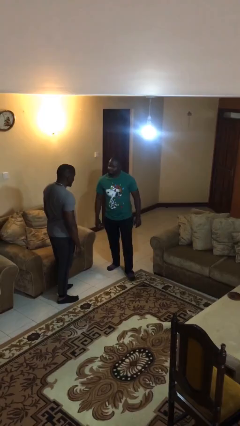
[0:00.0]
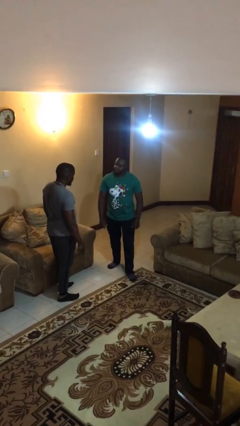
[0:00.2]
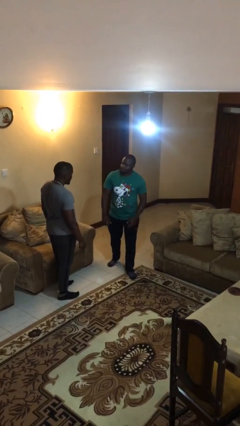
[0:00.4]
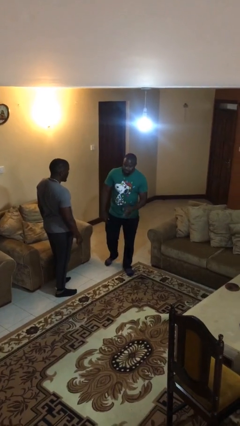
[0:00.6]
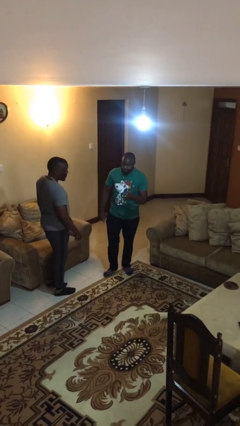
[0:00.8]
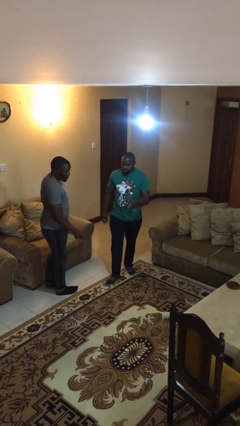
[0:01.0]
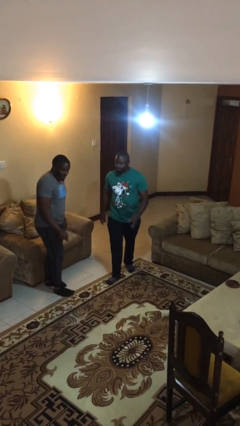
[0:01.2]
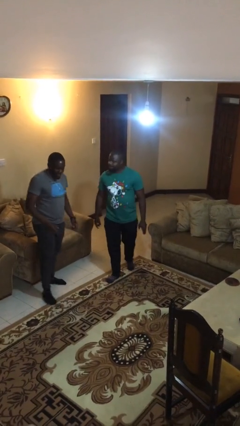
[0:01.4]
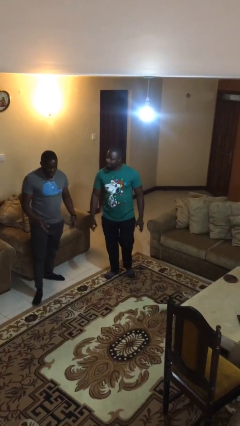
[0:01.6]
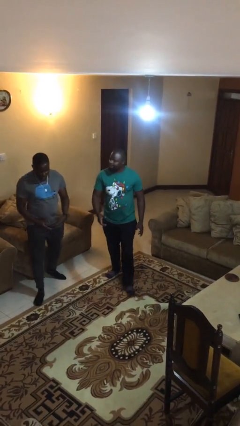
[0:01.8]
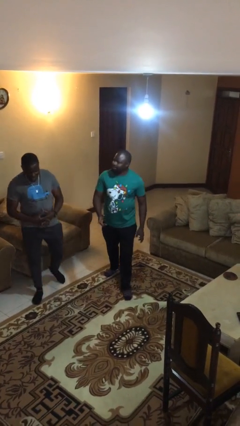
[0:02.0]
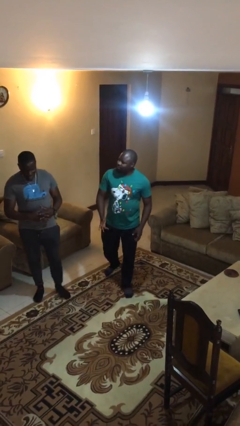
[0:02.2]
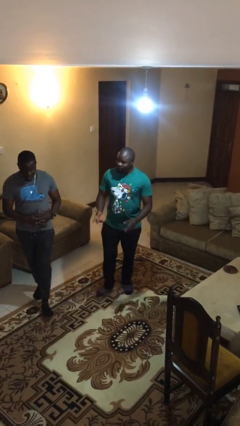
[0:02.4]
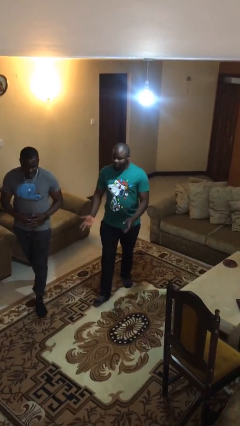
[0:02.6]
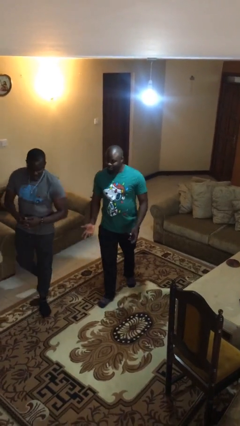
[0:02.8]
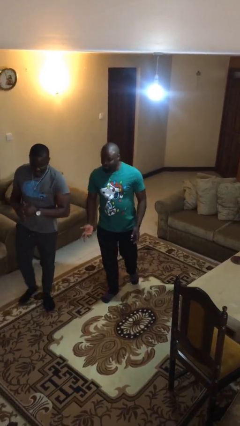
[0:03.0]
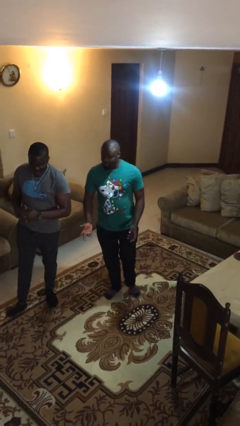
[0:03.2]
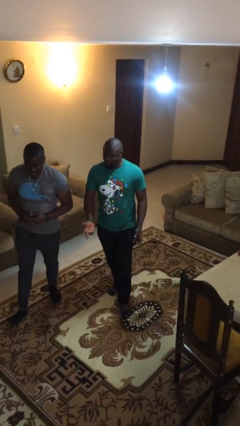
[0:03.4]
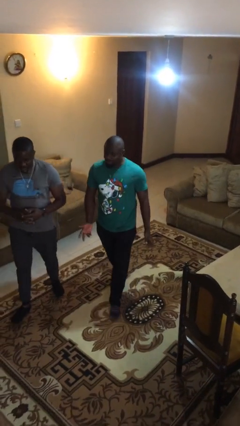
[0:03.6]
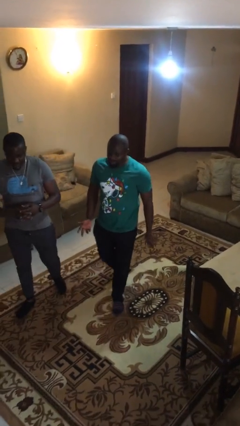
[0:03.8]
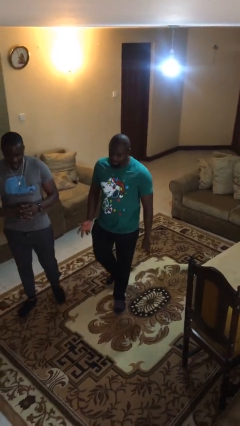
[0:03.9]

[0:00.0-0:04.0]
person talks to person

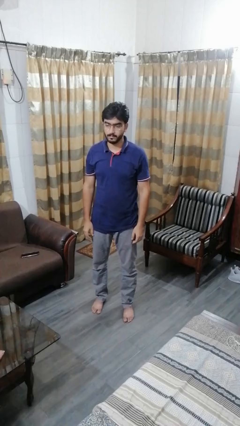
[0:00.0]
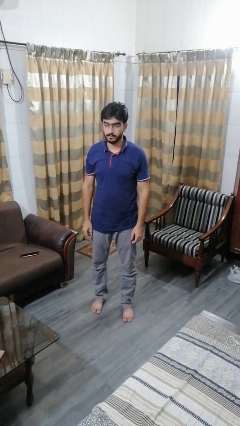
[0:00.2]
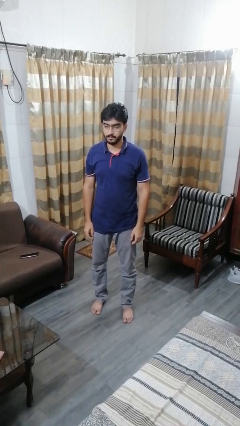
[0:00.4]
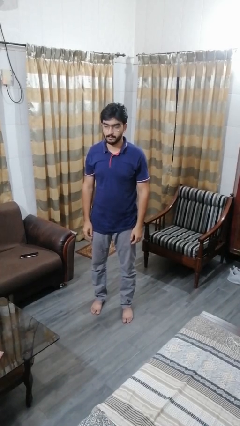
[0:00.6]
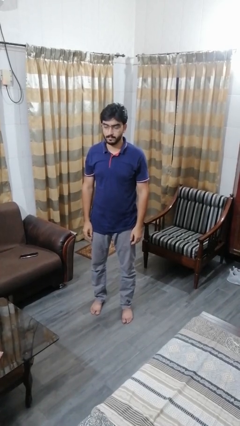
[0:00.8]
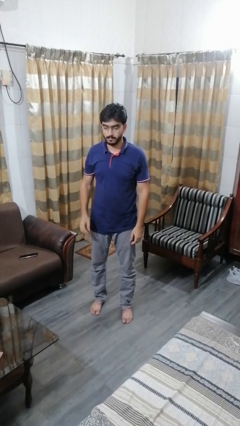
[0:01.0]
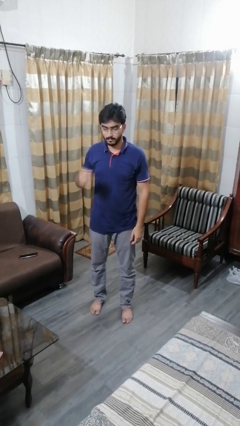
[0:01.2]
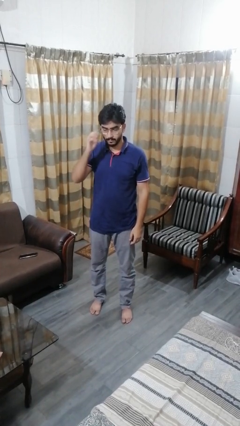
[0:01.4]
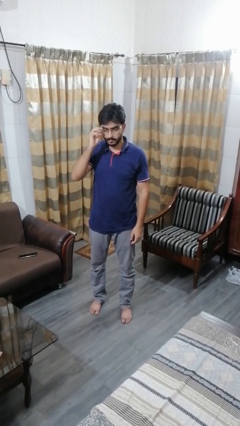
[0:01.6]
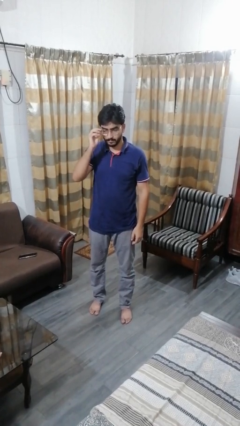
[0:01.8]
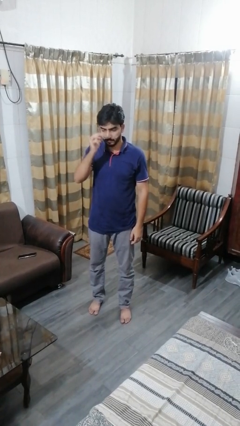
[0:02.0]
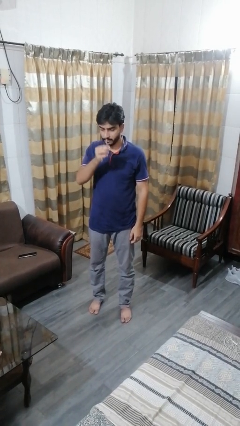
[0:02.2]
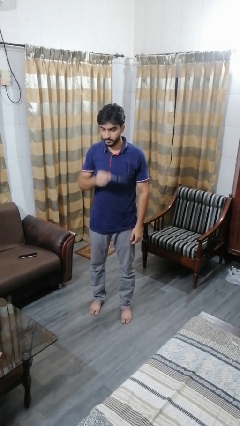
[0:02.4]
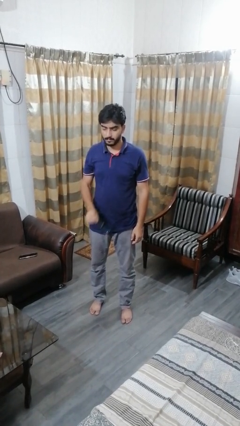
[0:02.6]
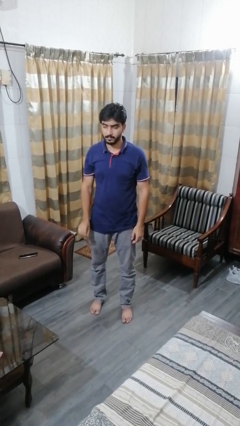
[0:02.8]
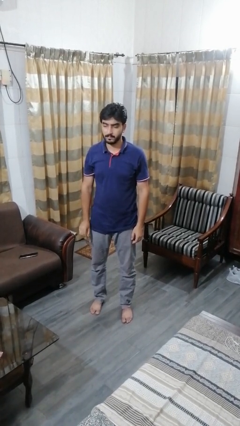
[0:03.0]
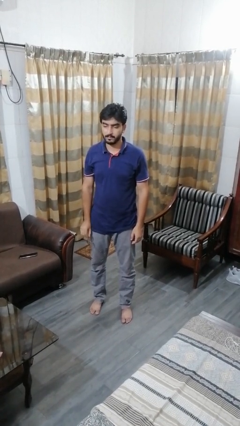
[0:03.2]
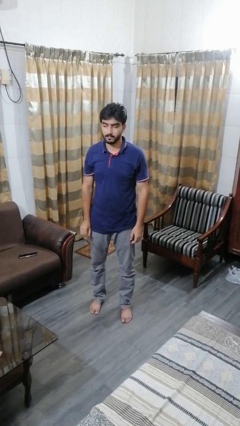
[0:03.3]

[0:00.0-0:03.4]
person takes off glasses

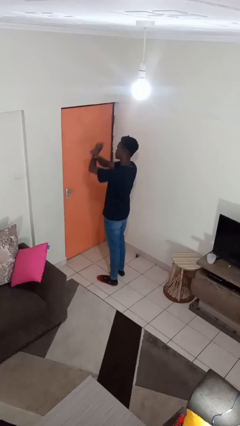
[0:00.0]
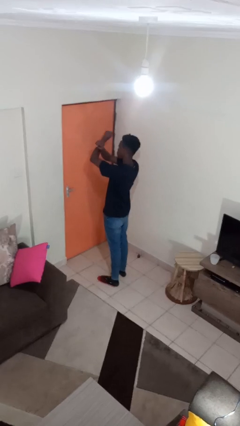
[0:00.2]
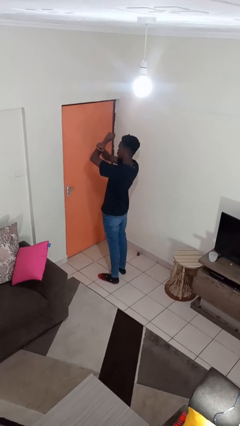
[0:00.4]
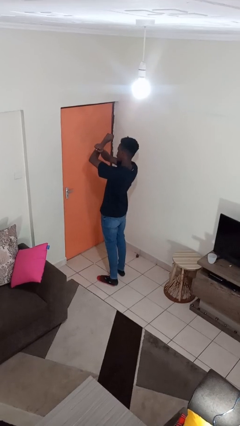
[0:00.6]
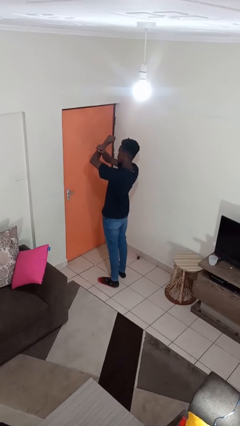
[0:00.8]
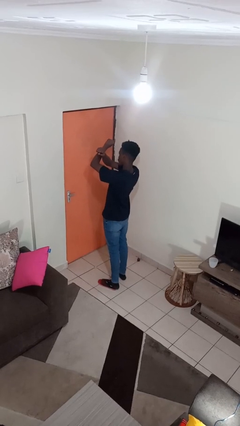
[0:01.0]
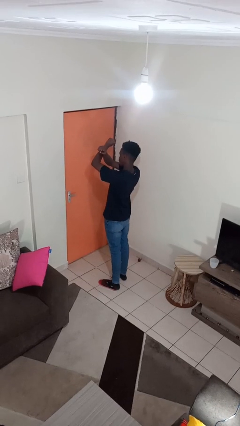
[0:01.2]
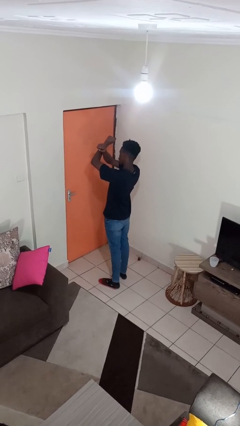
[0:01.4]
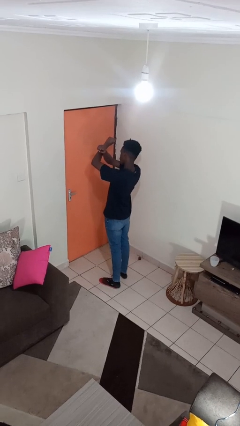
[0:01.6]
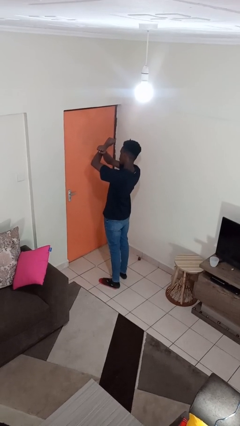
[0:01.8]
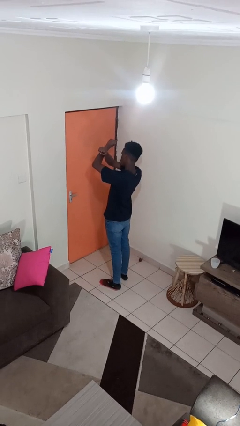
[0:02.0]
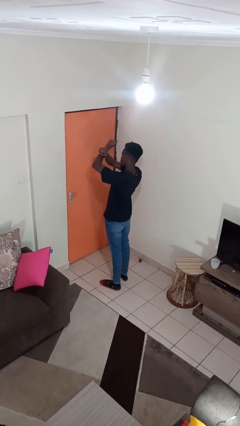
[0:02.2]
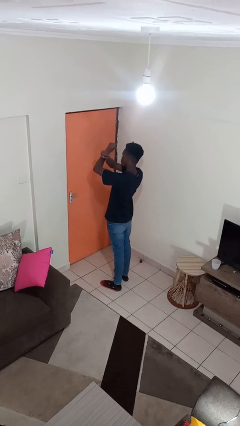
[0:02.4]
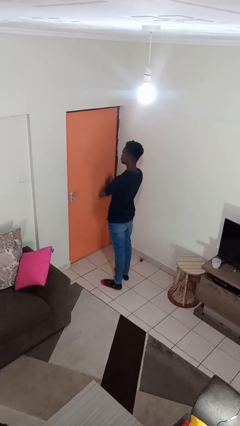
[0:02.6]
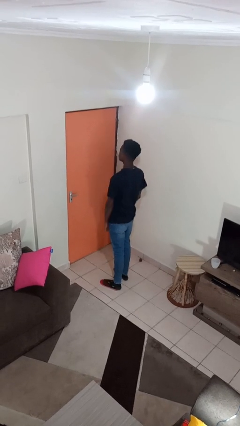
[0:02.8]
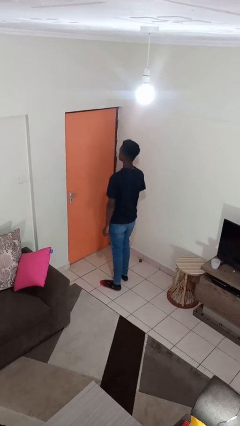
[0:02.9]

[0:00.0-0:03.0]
person gestures arms x

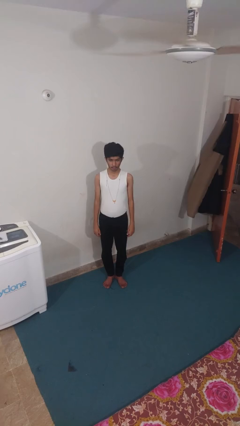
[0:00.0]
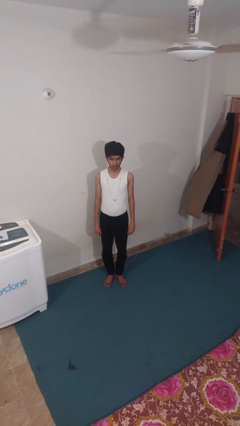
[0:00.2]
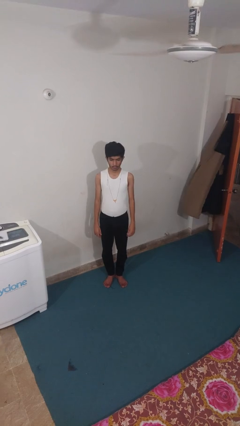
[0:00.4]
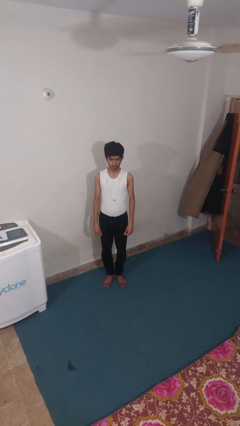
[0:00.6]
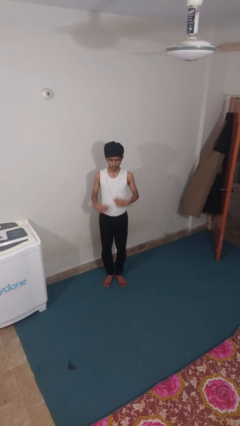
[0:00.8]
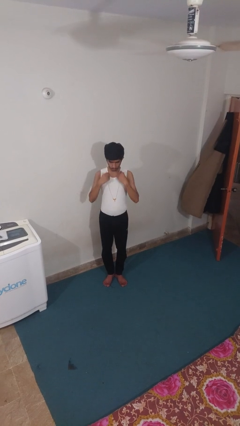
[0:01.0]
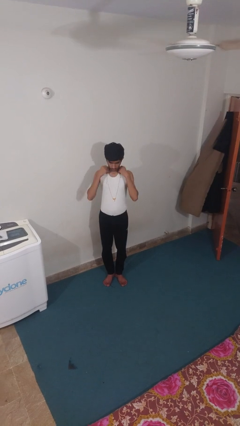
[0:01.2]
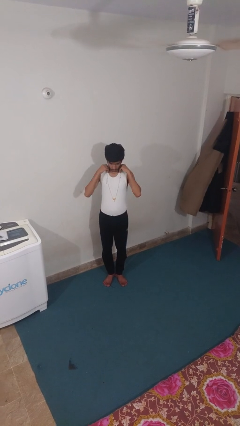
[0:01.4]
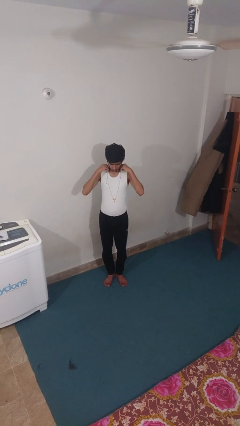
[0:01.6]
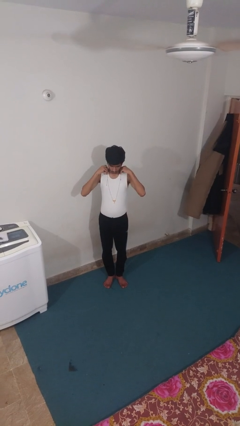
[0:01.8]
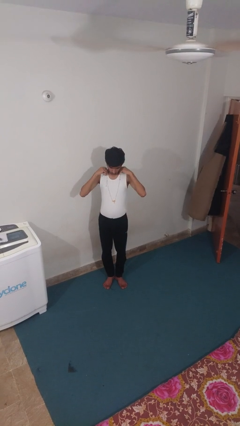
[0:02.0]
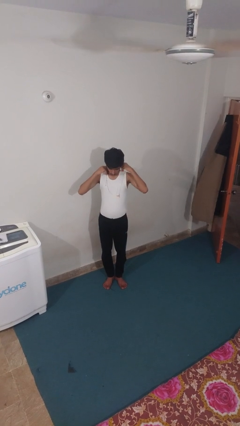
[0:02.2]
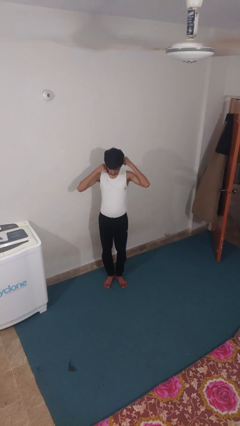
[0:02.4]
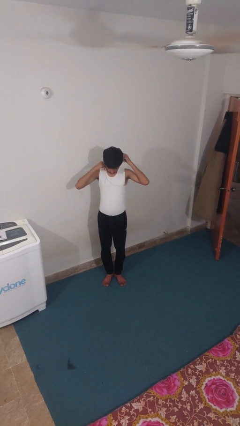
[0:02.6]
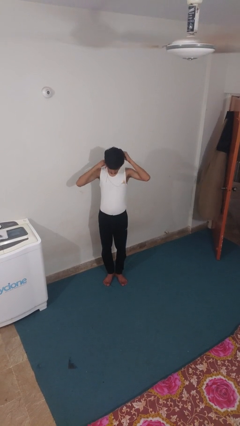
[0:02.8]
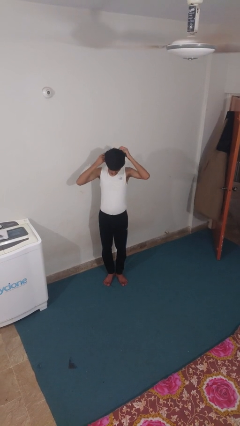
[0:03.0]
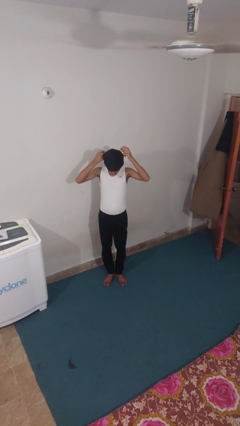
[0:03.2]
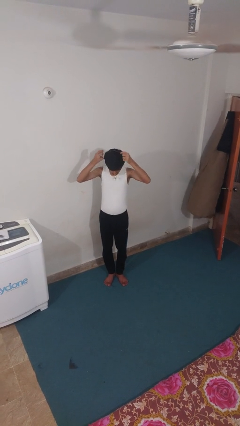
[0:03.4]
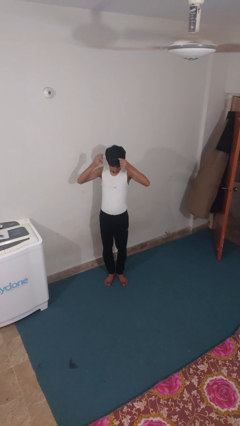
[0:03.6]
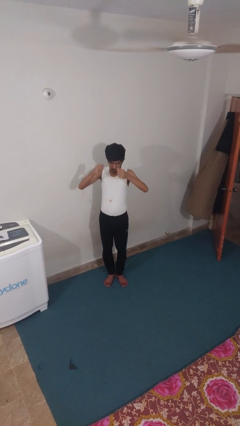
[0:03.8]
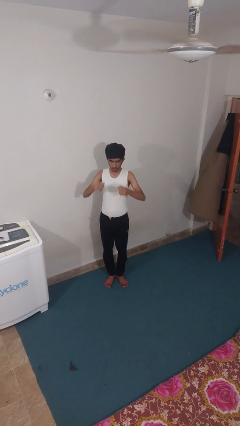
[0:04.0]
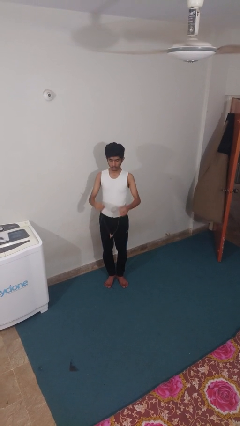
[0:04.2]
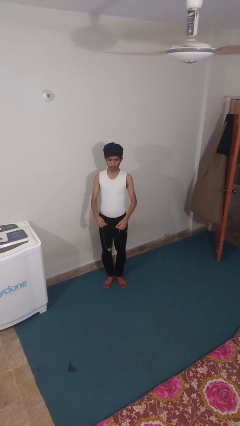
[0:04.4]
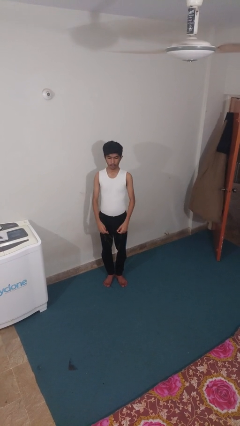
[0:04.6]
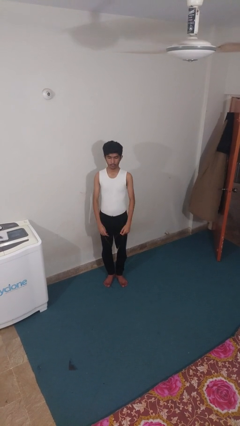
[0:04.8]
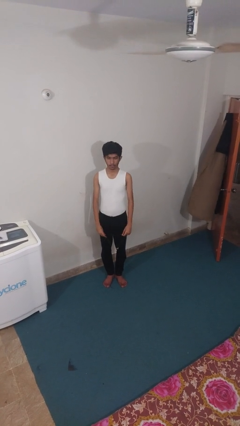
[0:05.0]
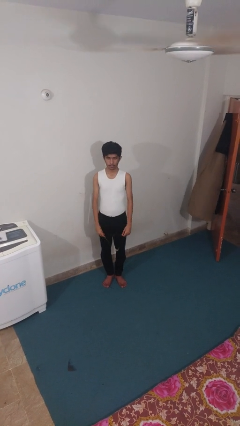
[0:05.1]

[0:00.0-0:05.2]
person takes off necklace

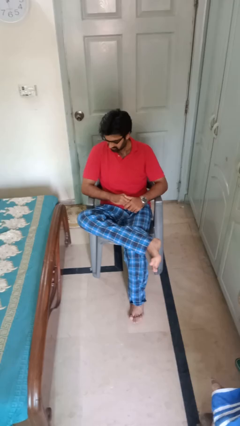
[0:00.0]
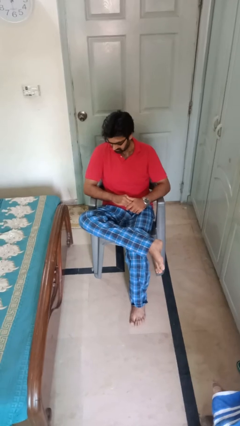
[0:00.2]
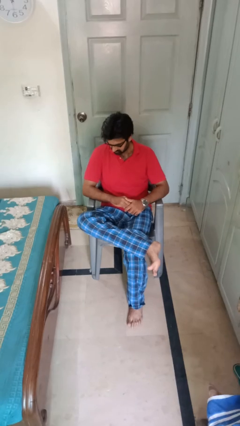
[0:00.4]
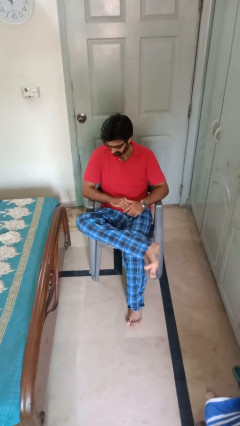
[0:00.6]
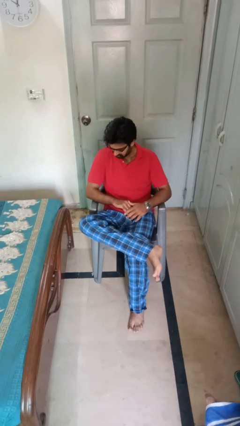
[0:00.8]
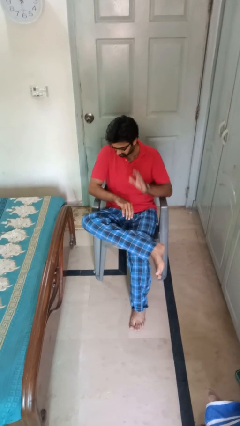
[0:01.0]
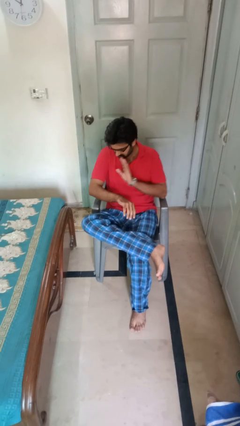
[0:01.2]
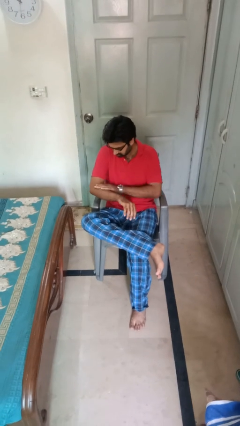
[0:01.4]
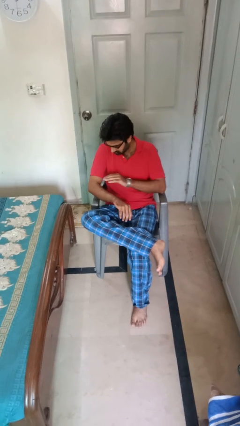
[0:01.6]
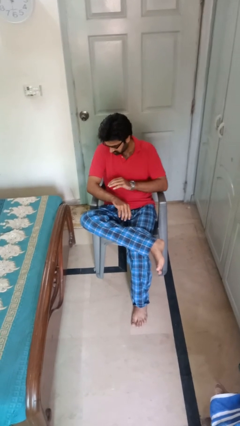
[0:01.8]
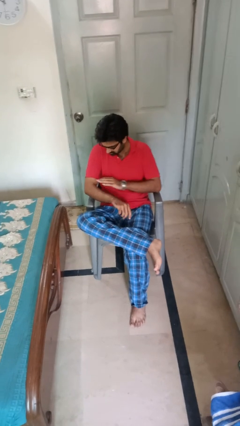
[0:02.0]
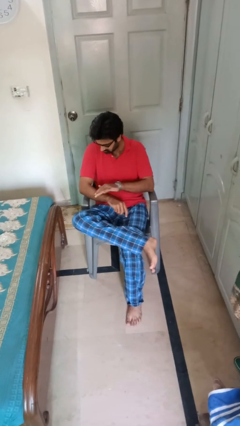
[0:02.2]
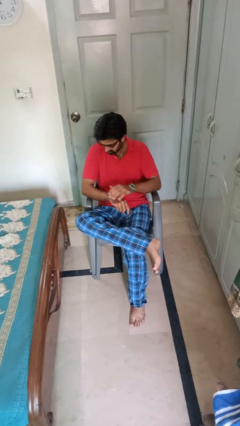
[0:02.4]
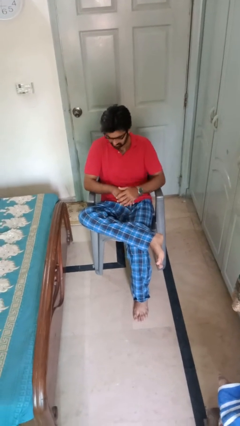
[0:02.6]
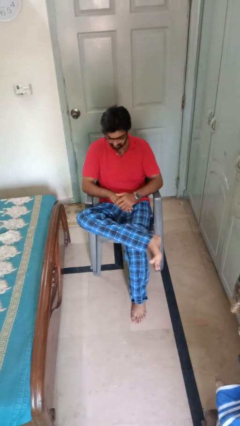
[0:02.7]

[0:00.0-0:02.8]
person swats bug
